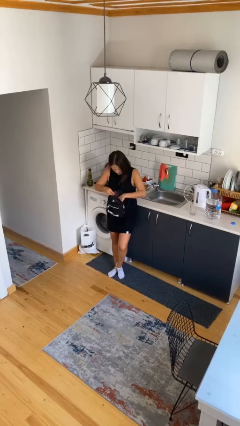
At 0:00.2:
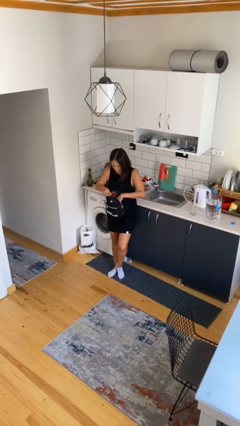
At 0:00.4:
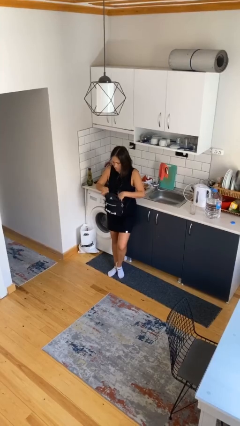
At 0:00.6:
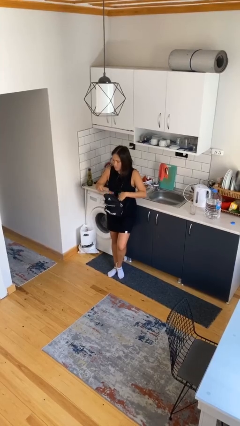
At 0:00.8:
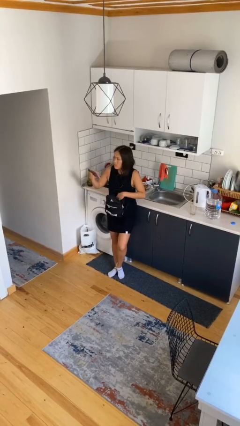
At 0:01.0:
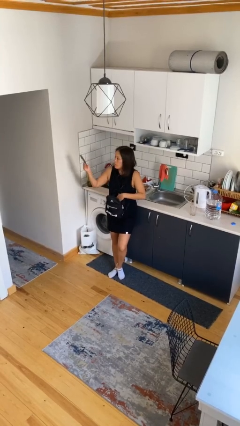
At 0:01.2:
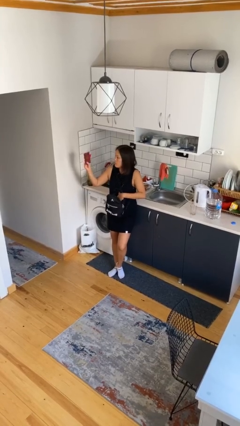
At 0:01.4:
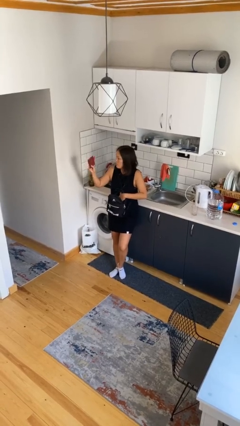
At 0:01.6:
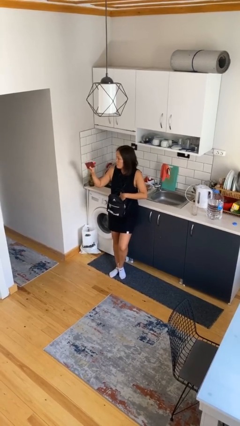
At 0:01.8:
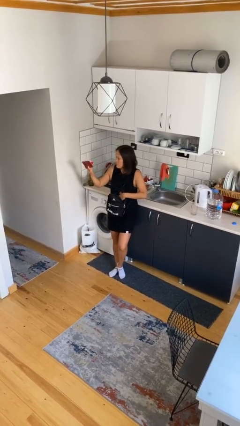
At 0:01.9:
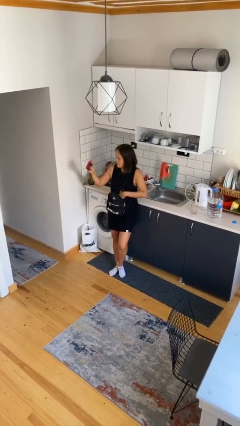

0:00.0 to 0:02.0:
person takes object from backpack

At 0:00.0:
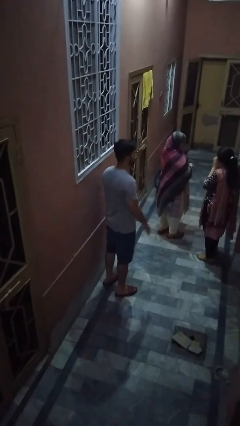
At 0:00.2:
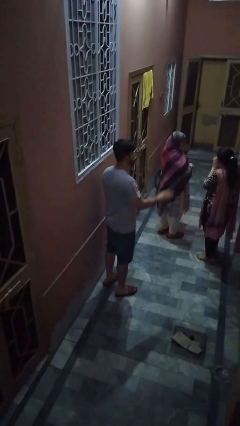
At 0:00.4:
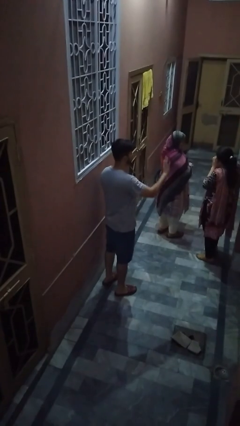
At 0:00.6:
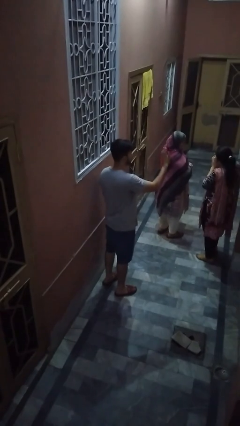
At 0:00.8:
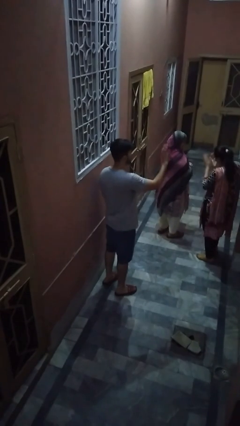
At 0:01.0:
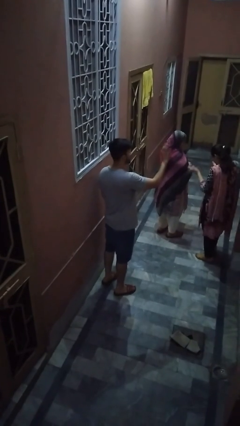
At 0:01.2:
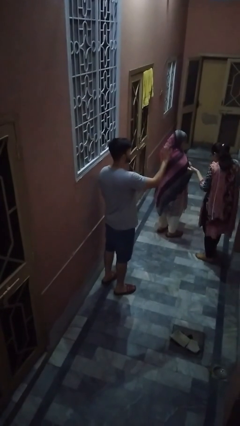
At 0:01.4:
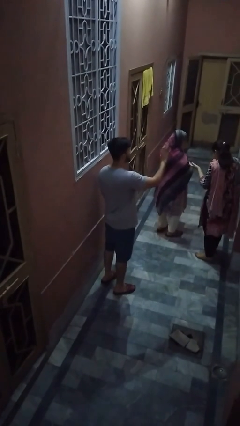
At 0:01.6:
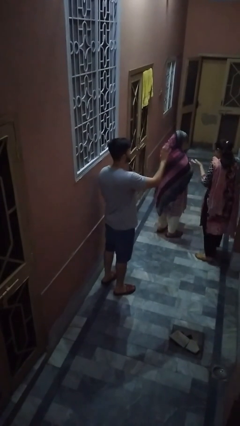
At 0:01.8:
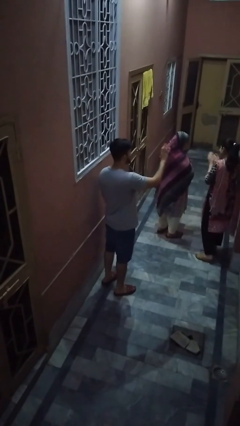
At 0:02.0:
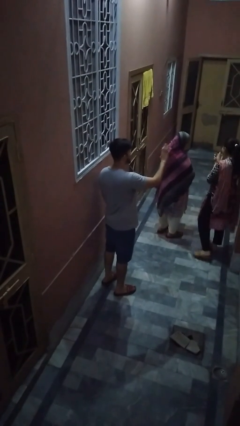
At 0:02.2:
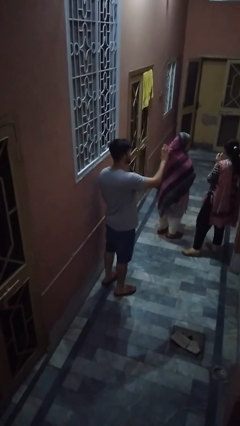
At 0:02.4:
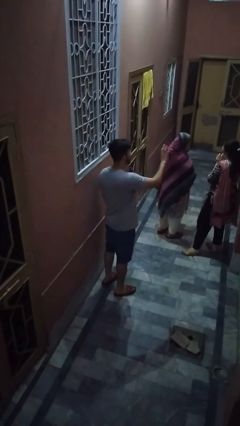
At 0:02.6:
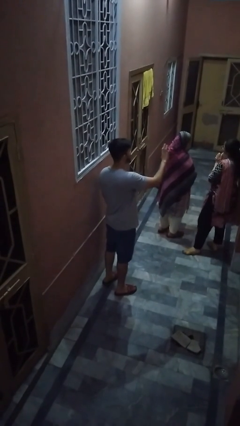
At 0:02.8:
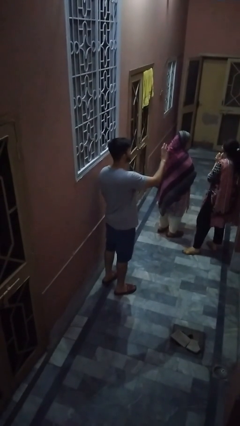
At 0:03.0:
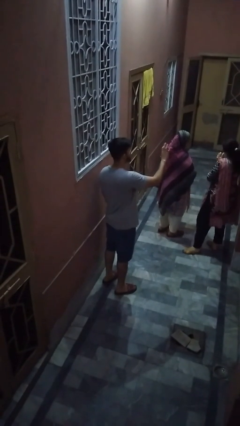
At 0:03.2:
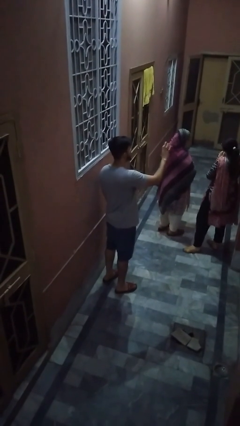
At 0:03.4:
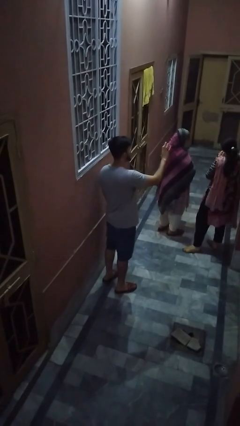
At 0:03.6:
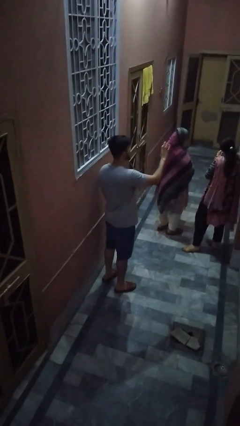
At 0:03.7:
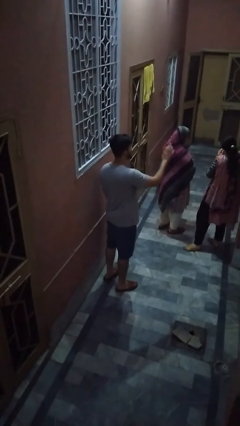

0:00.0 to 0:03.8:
person waves at person

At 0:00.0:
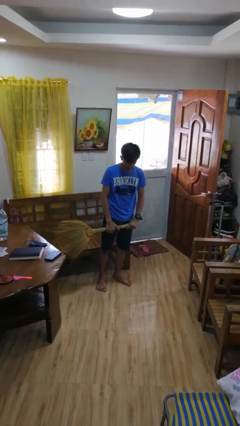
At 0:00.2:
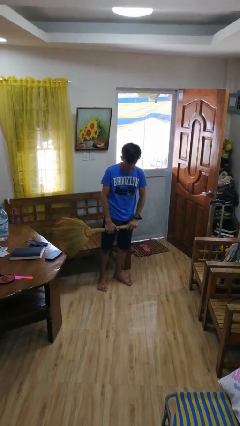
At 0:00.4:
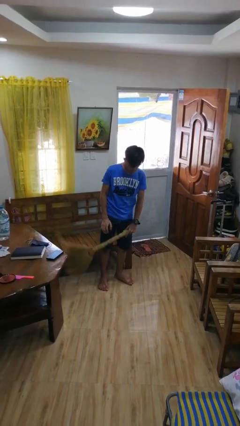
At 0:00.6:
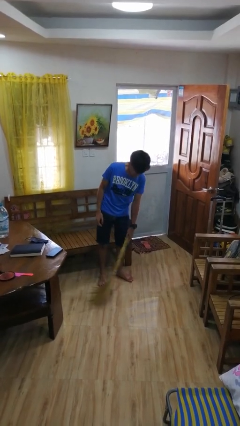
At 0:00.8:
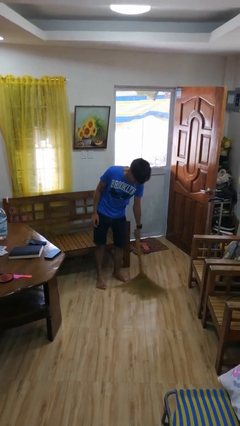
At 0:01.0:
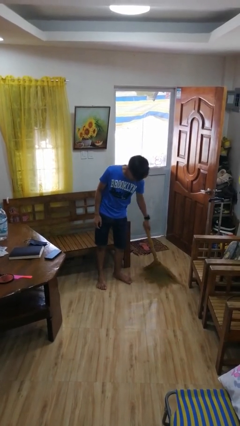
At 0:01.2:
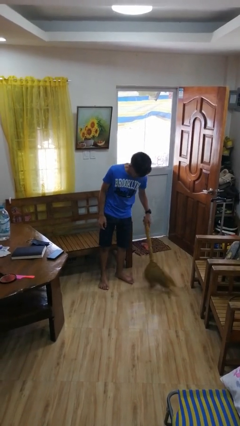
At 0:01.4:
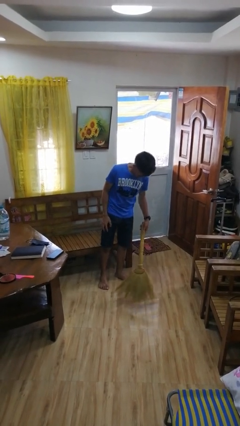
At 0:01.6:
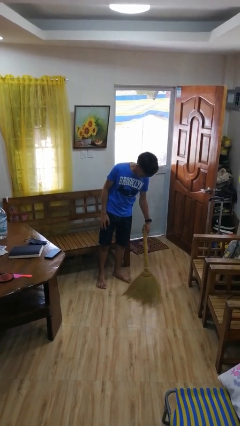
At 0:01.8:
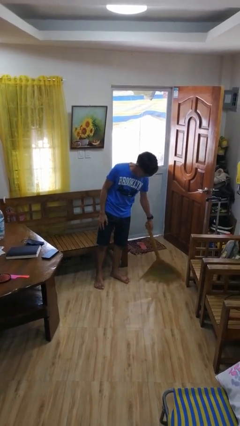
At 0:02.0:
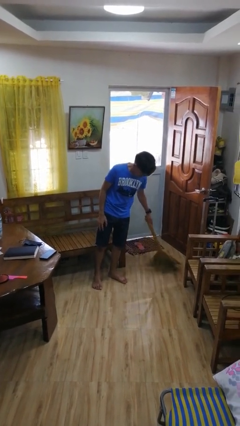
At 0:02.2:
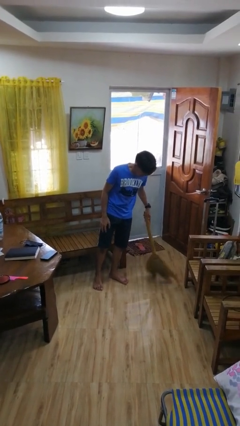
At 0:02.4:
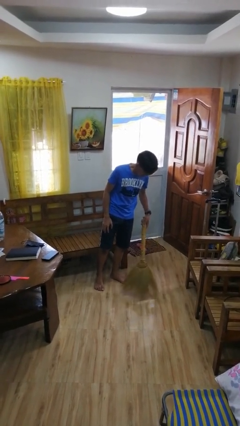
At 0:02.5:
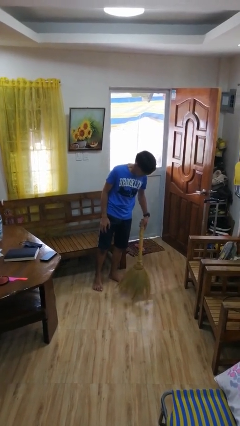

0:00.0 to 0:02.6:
person sweeps floor

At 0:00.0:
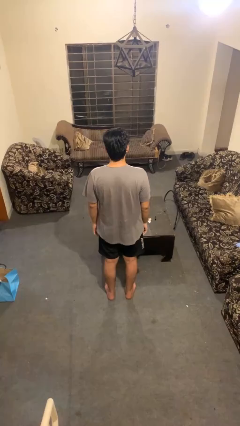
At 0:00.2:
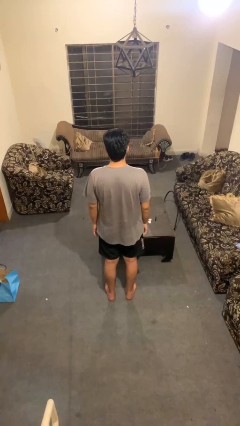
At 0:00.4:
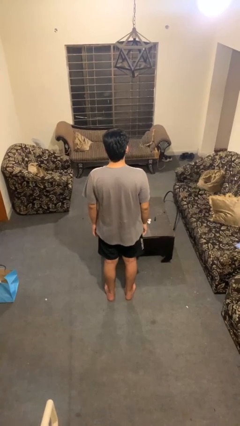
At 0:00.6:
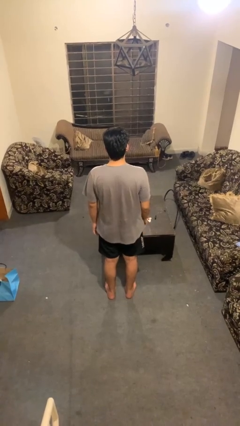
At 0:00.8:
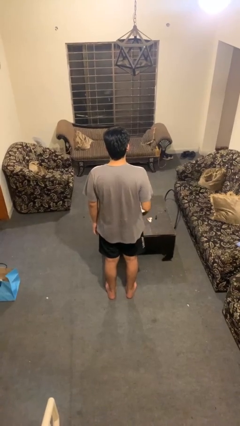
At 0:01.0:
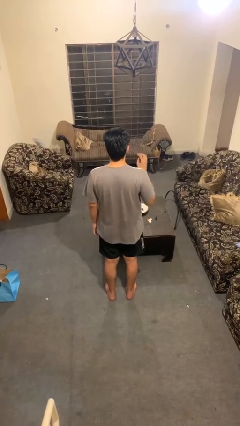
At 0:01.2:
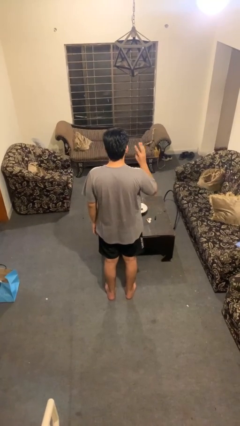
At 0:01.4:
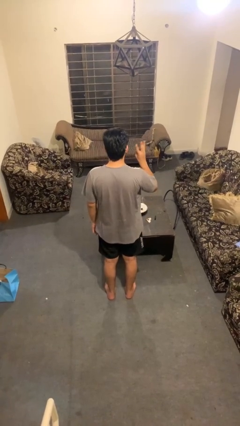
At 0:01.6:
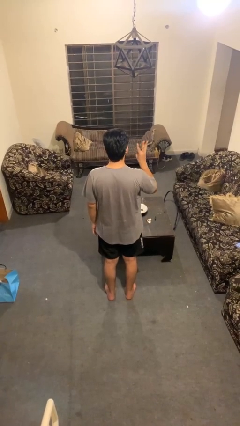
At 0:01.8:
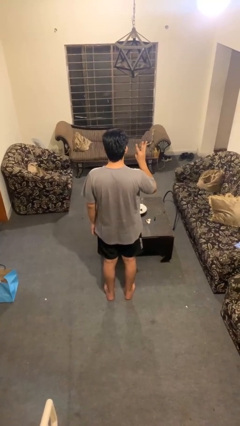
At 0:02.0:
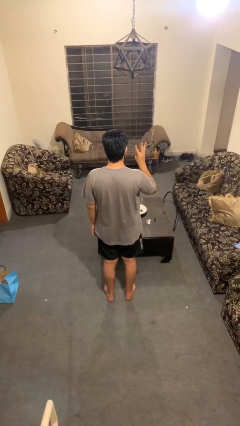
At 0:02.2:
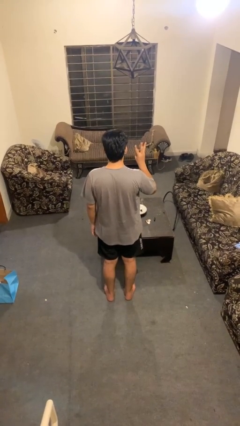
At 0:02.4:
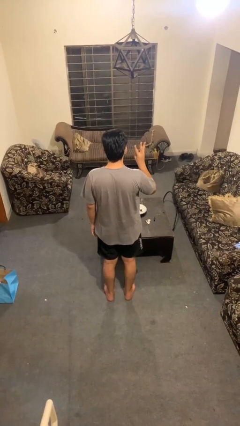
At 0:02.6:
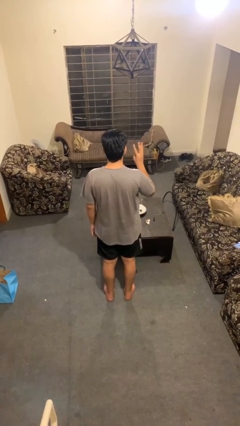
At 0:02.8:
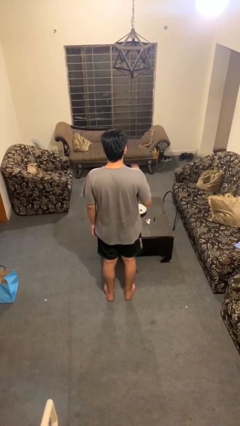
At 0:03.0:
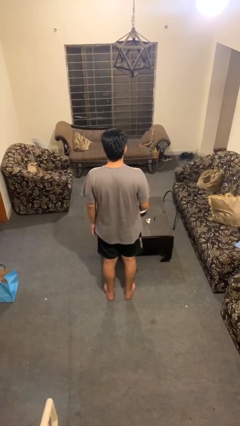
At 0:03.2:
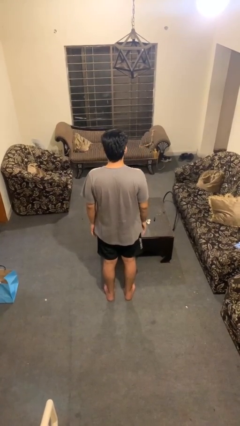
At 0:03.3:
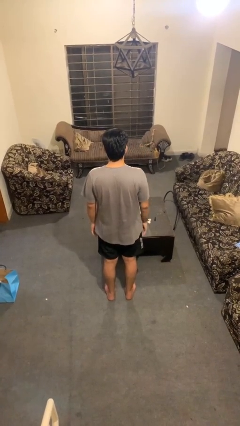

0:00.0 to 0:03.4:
person gestures number three

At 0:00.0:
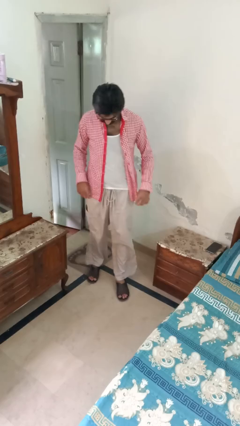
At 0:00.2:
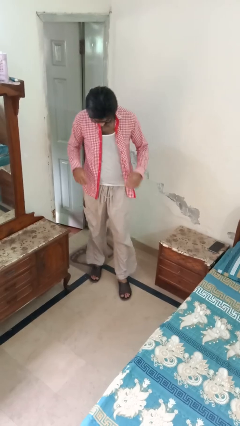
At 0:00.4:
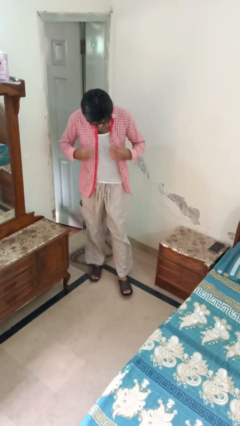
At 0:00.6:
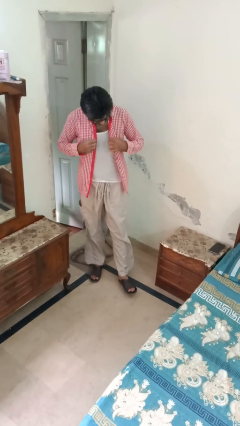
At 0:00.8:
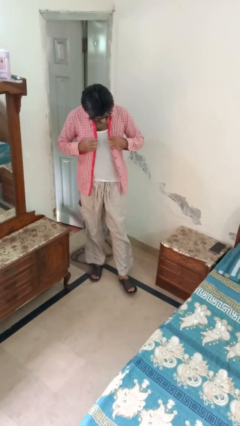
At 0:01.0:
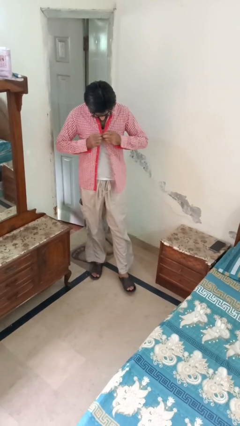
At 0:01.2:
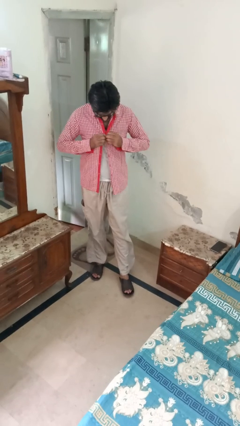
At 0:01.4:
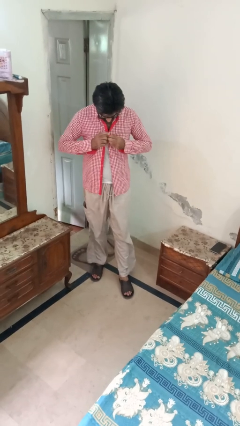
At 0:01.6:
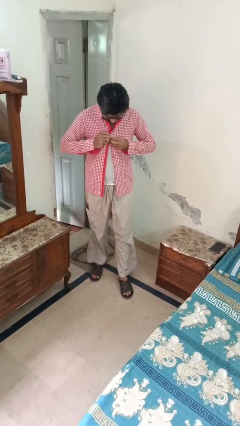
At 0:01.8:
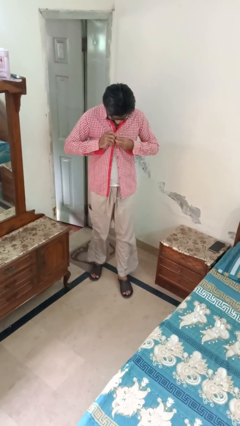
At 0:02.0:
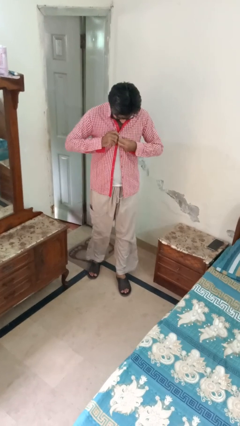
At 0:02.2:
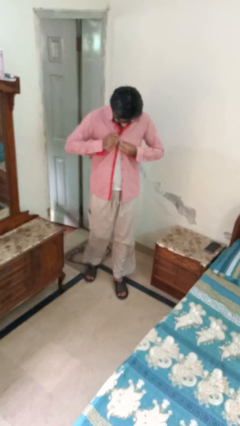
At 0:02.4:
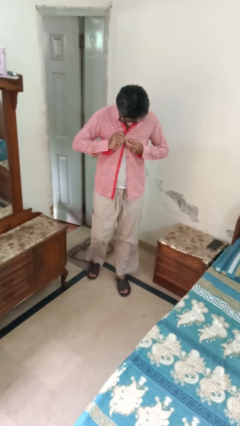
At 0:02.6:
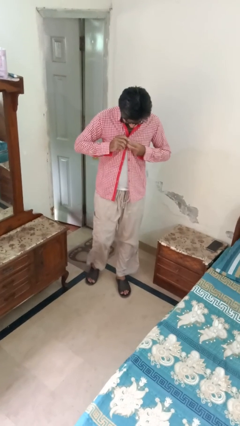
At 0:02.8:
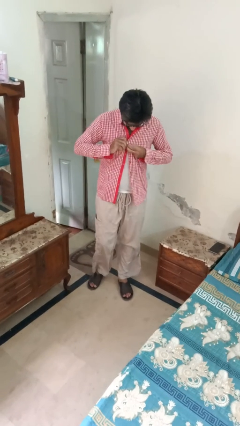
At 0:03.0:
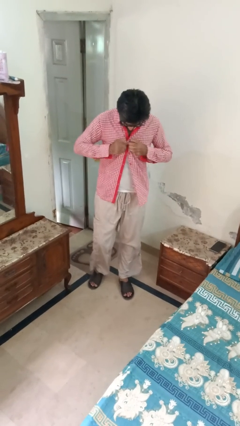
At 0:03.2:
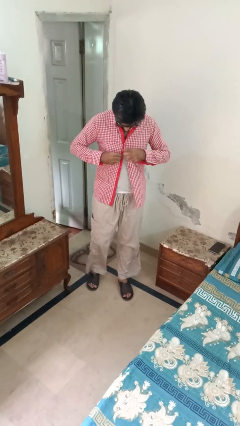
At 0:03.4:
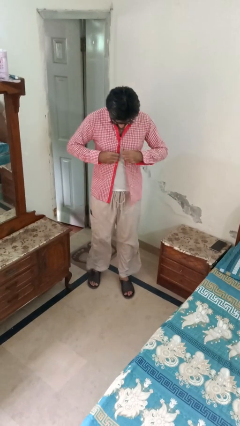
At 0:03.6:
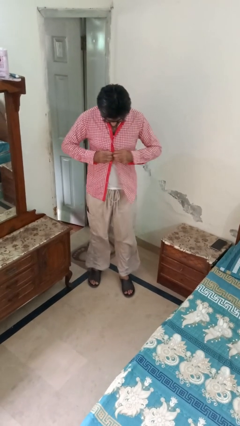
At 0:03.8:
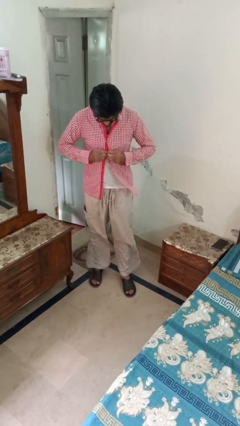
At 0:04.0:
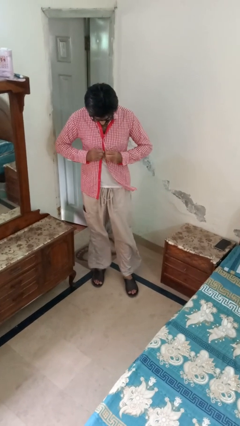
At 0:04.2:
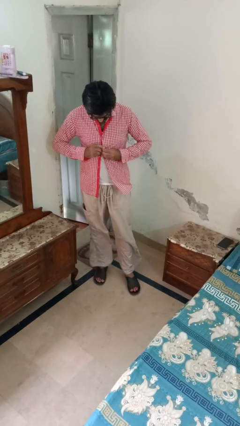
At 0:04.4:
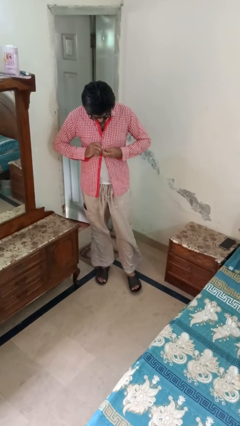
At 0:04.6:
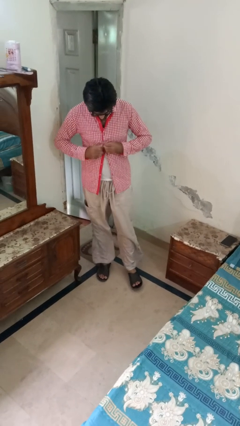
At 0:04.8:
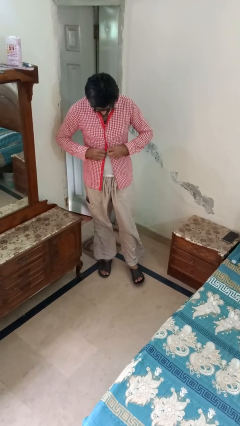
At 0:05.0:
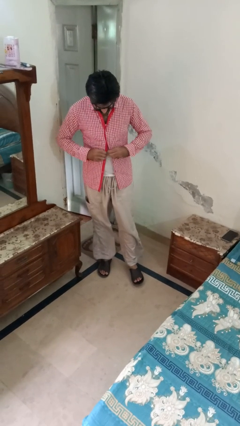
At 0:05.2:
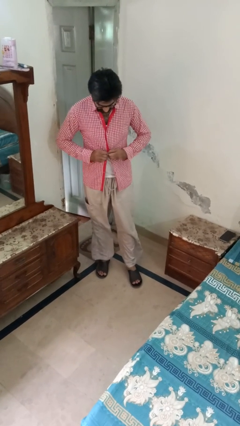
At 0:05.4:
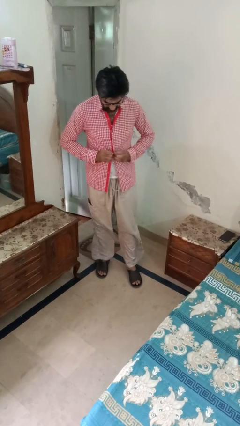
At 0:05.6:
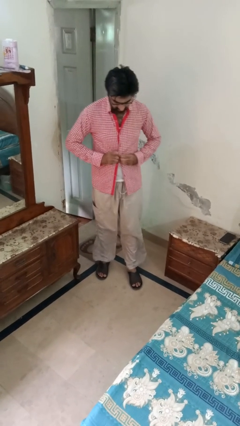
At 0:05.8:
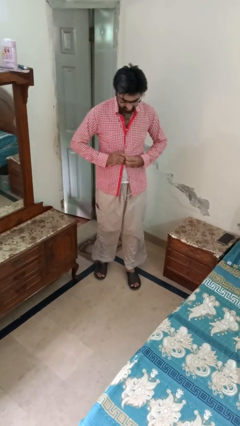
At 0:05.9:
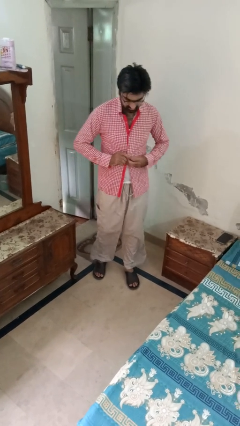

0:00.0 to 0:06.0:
person buttons shirt
